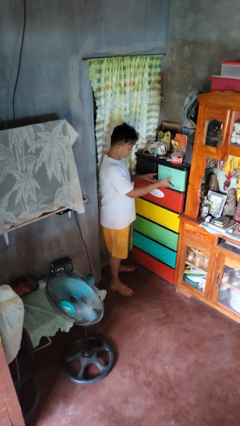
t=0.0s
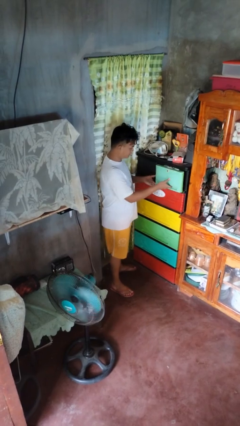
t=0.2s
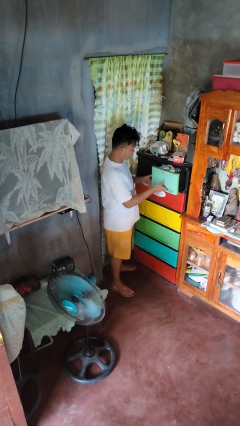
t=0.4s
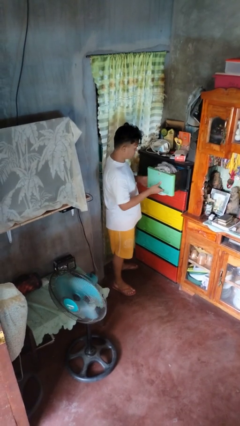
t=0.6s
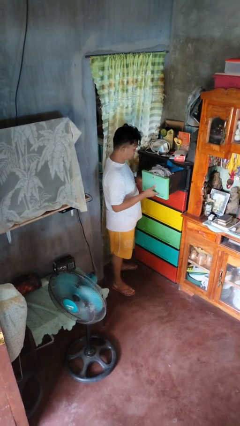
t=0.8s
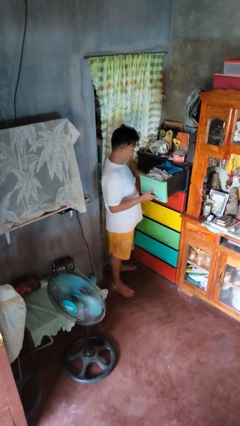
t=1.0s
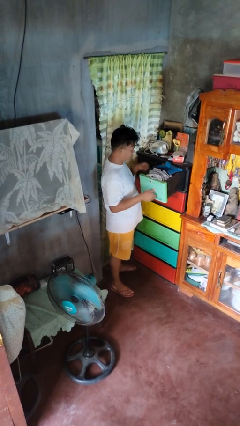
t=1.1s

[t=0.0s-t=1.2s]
person opens dresser drawer

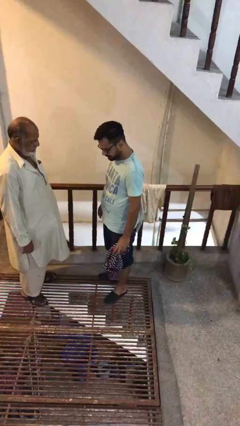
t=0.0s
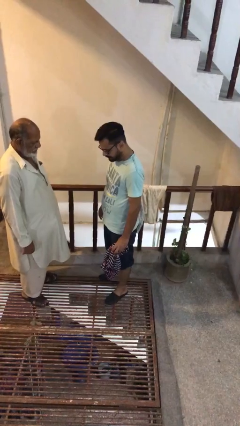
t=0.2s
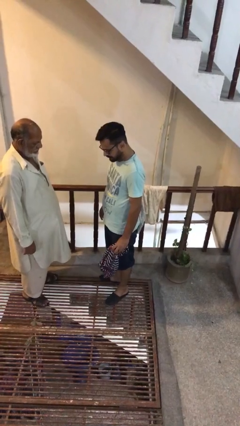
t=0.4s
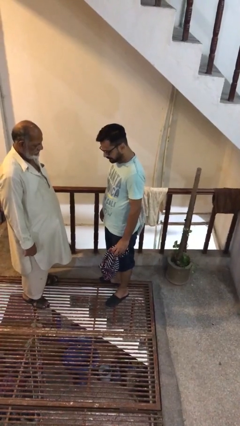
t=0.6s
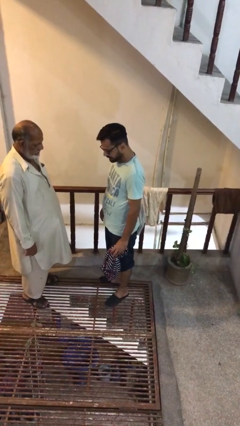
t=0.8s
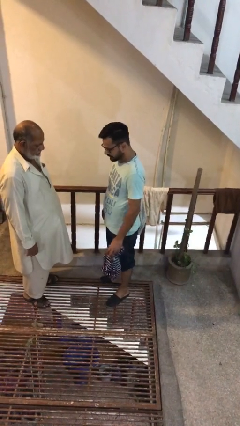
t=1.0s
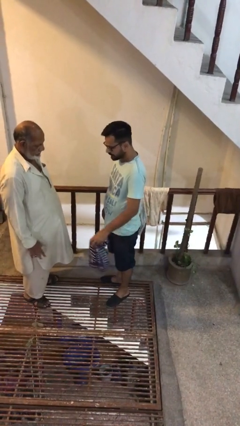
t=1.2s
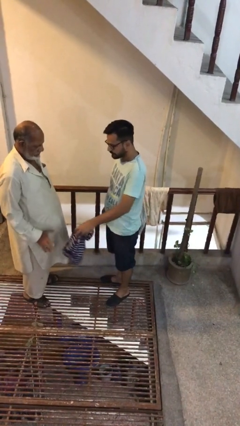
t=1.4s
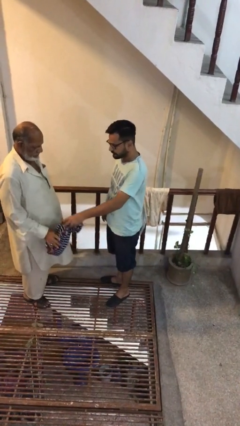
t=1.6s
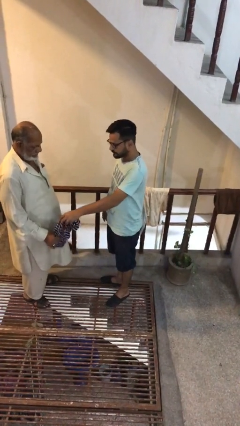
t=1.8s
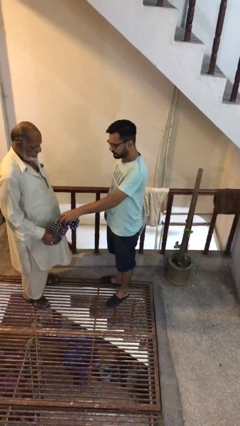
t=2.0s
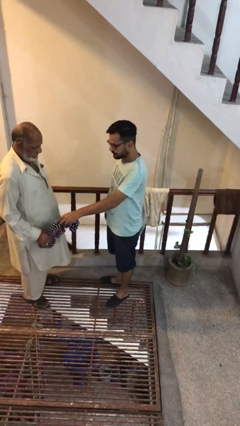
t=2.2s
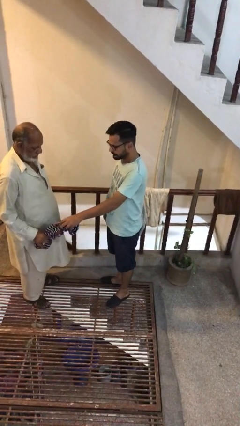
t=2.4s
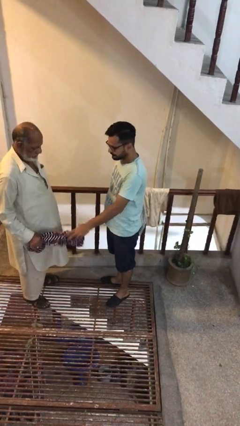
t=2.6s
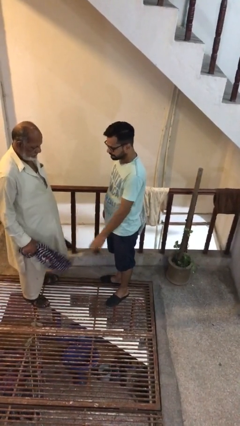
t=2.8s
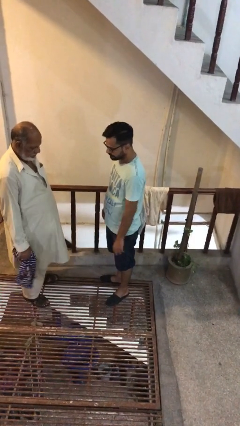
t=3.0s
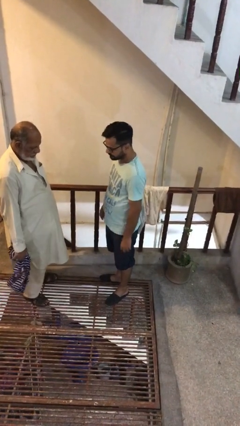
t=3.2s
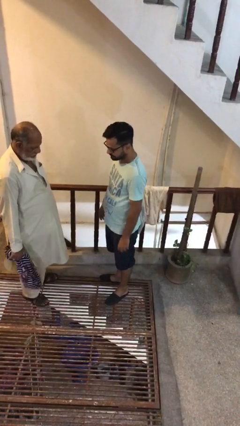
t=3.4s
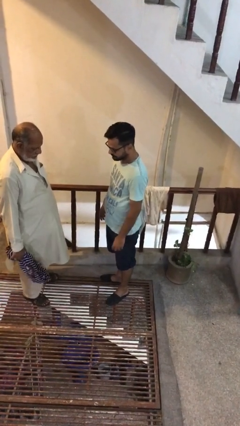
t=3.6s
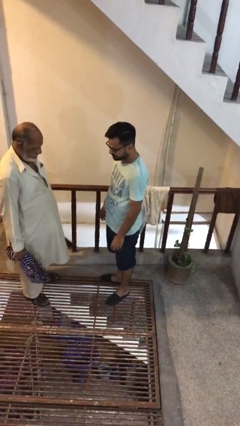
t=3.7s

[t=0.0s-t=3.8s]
person transfers object to person

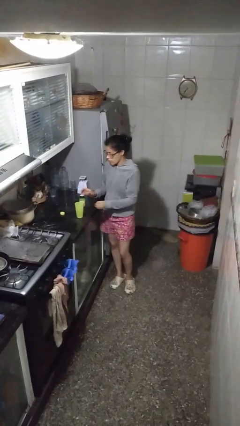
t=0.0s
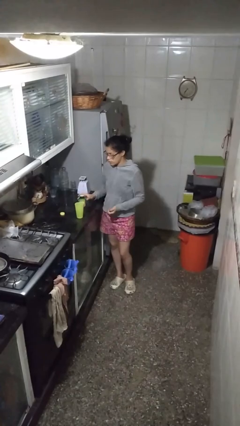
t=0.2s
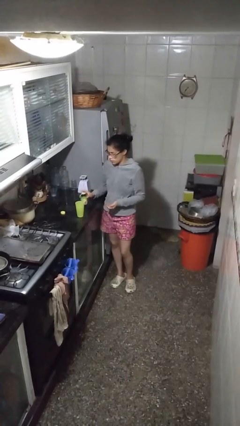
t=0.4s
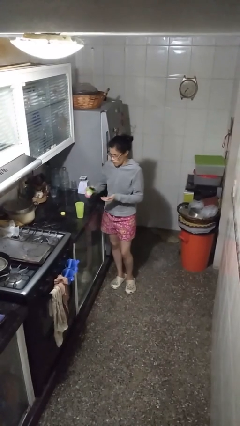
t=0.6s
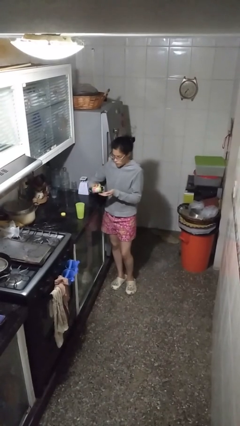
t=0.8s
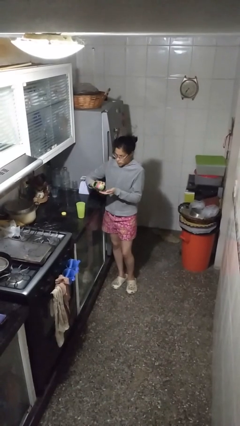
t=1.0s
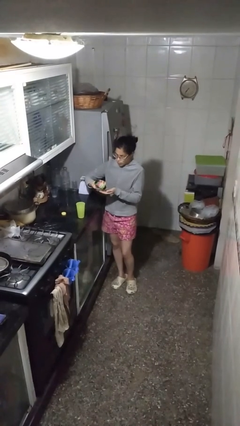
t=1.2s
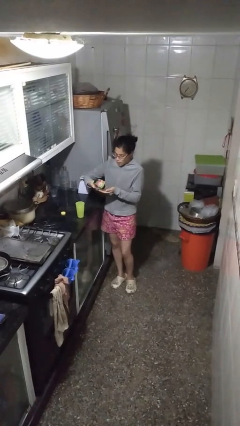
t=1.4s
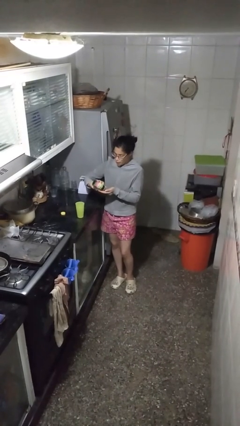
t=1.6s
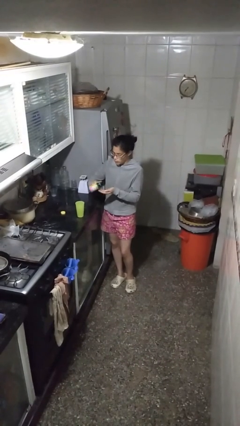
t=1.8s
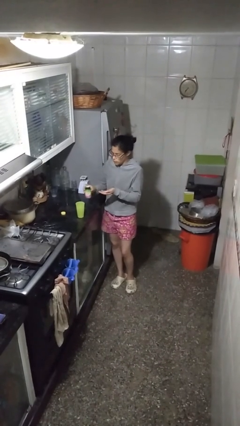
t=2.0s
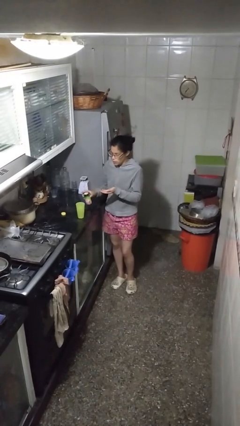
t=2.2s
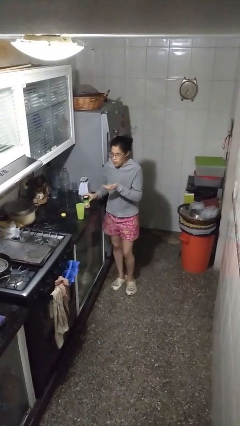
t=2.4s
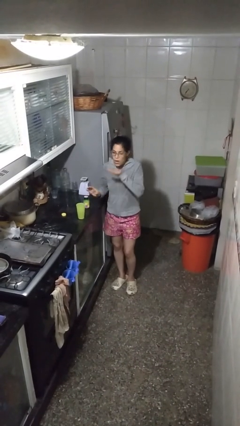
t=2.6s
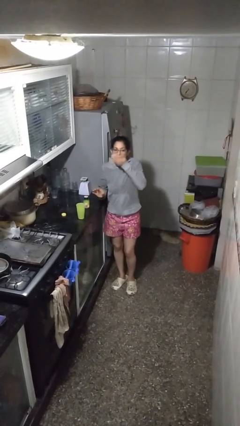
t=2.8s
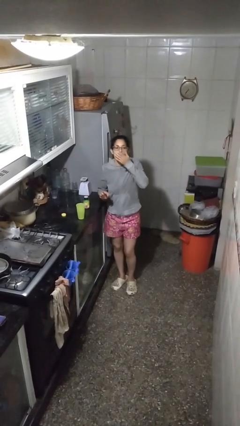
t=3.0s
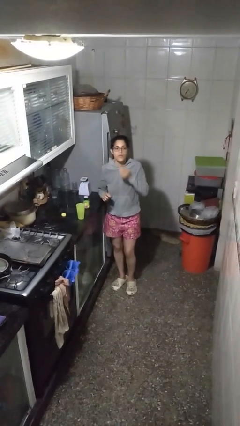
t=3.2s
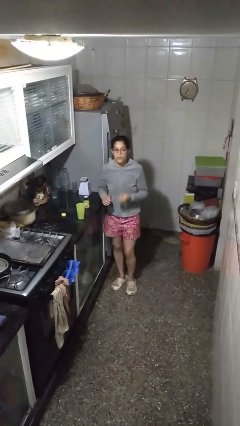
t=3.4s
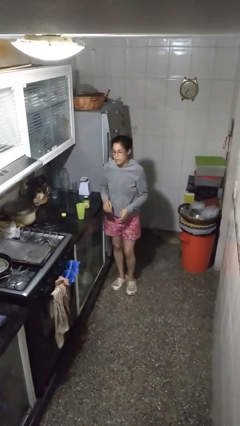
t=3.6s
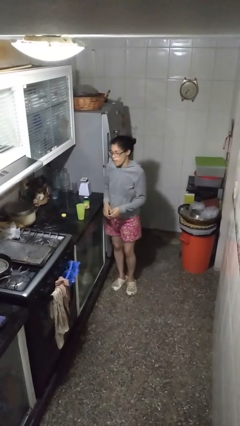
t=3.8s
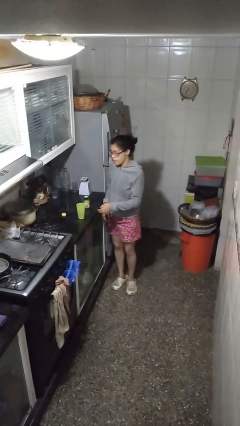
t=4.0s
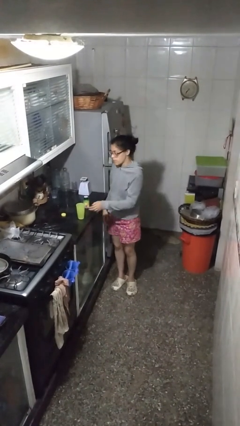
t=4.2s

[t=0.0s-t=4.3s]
person takes medicine pills

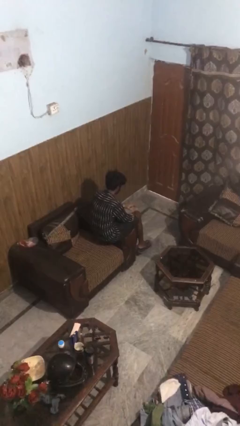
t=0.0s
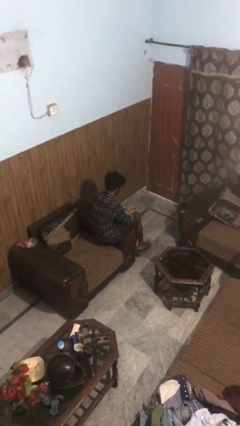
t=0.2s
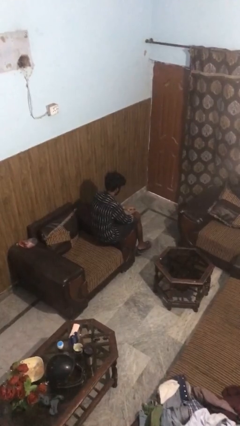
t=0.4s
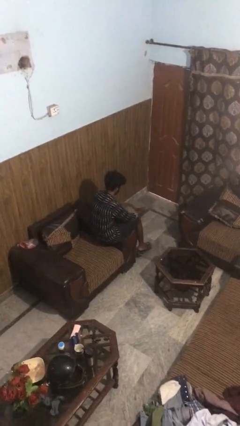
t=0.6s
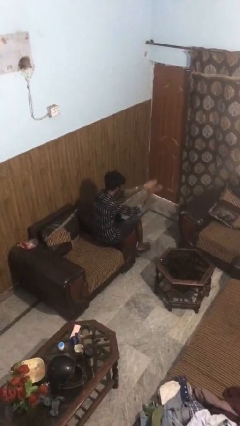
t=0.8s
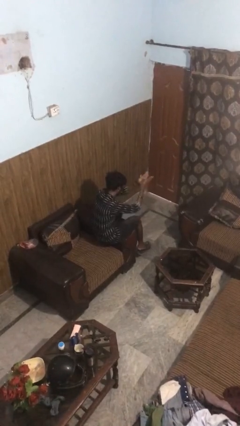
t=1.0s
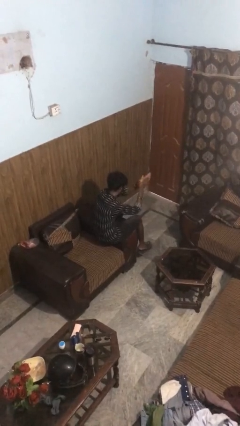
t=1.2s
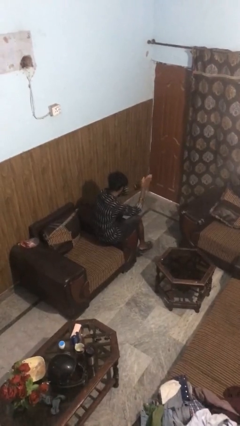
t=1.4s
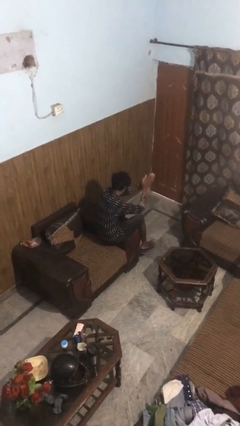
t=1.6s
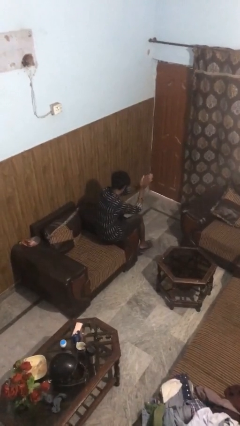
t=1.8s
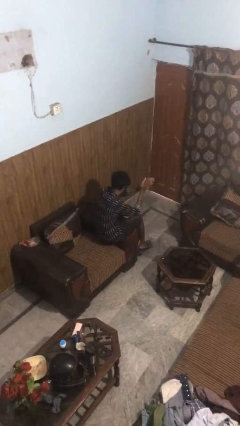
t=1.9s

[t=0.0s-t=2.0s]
person claps hands

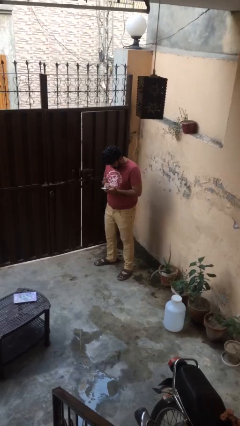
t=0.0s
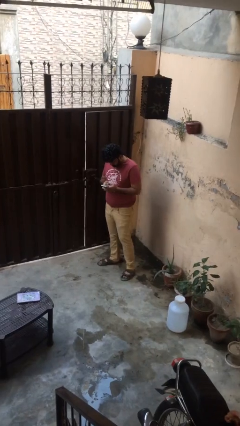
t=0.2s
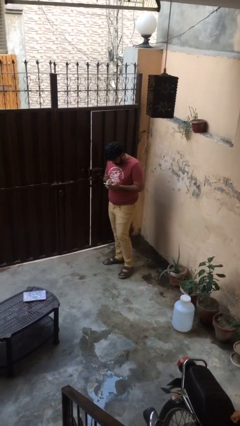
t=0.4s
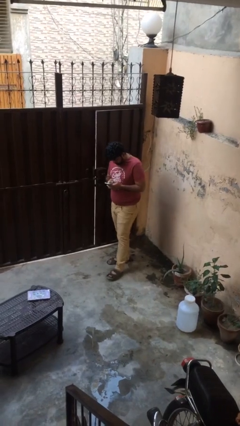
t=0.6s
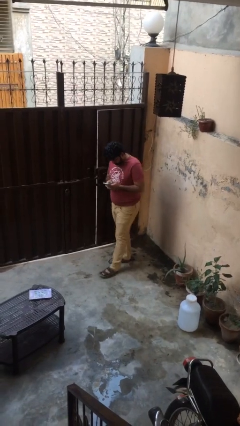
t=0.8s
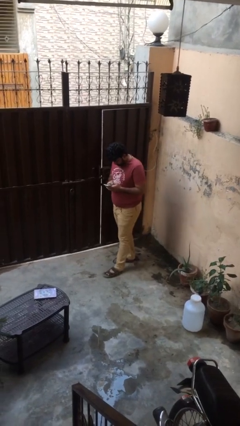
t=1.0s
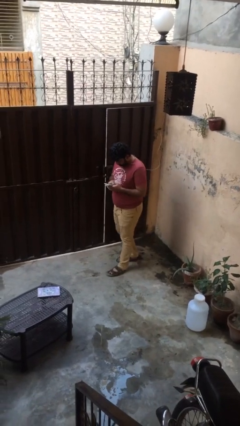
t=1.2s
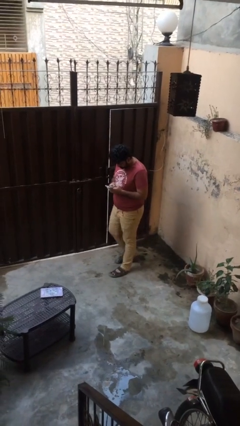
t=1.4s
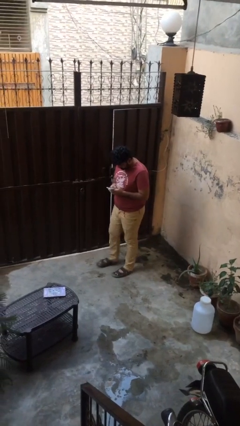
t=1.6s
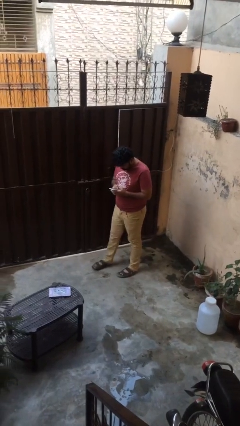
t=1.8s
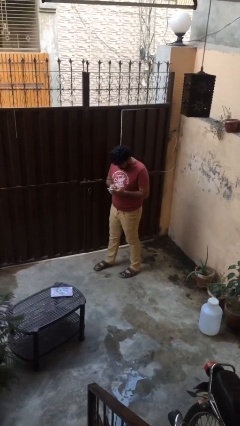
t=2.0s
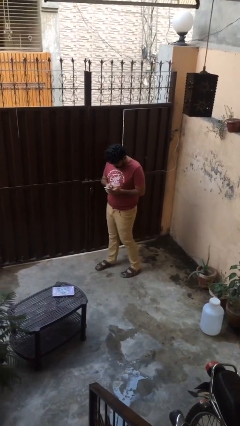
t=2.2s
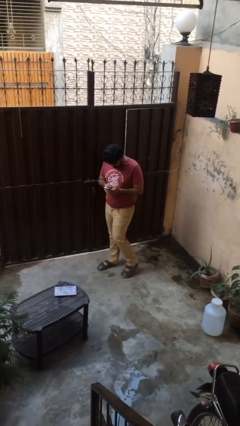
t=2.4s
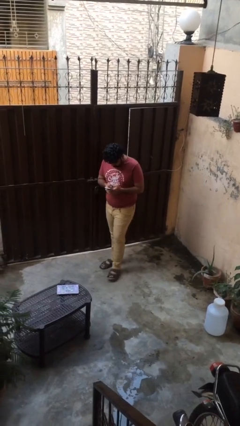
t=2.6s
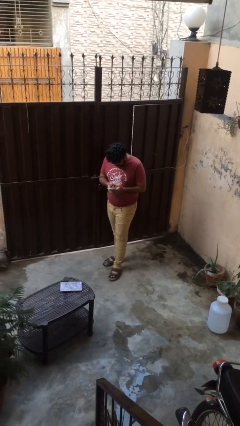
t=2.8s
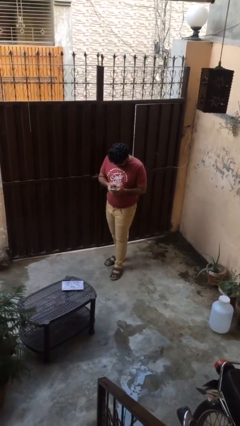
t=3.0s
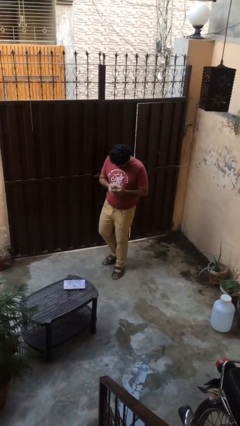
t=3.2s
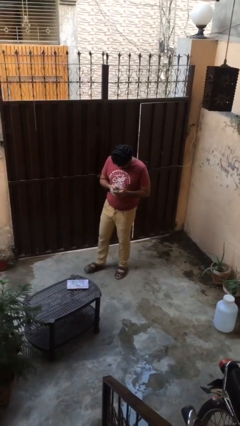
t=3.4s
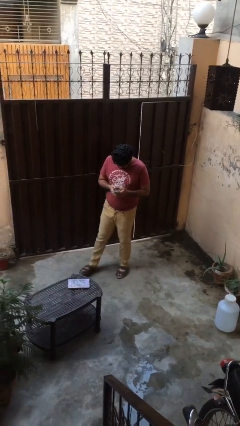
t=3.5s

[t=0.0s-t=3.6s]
person texts on phone

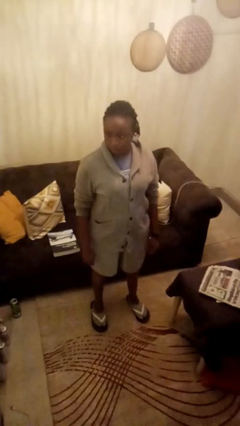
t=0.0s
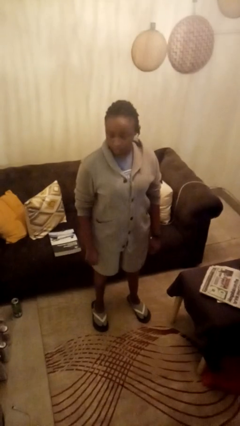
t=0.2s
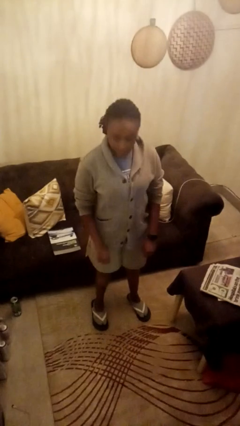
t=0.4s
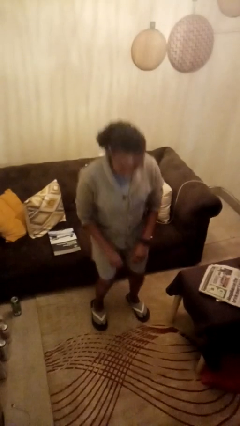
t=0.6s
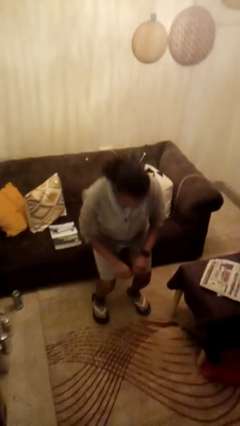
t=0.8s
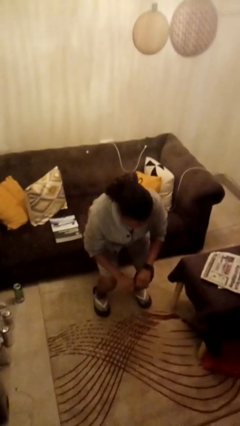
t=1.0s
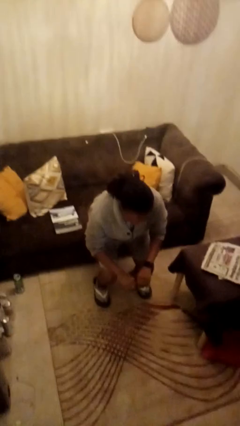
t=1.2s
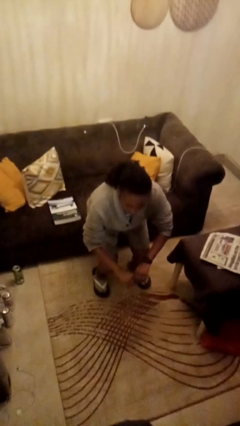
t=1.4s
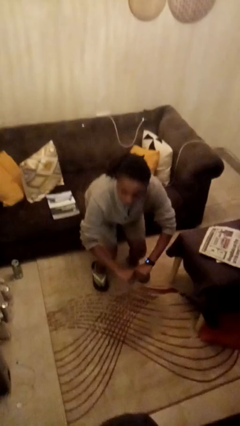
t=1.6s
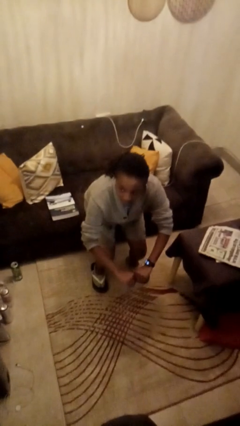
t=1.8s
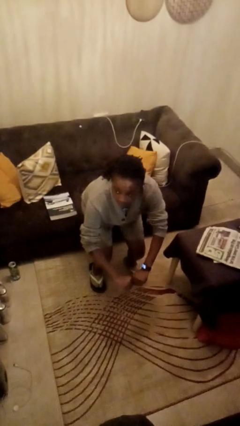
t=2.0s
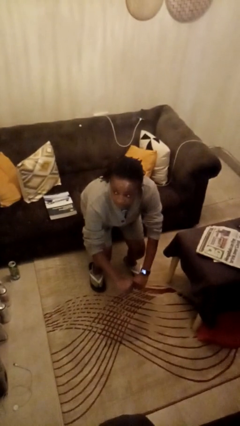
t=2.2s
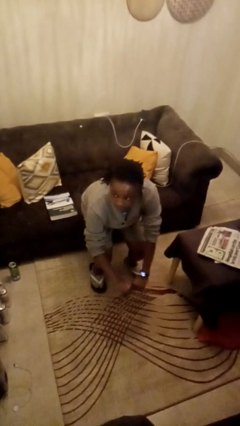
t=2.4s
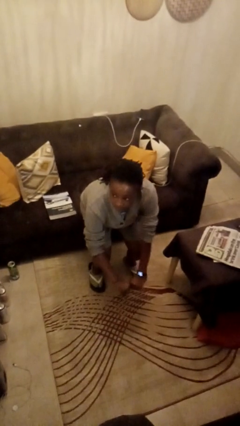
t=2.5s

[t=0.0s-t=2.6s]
person squats
